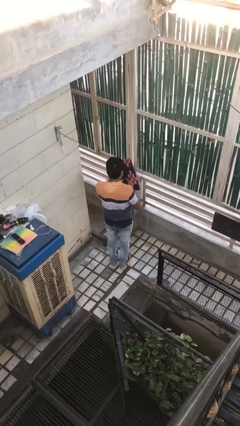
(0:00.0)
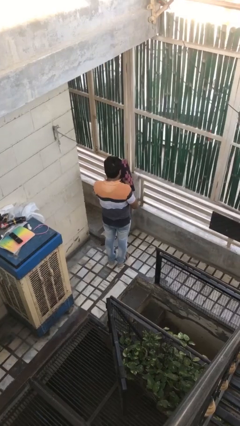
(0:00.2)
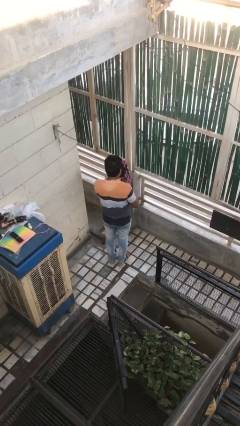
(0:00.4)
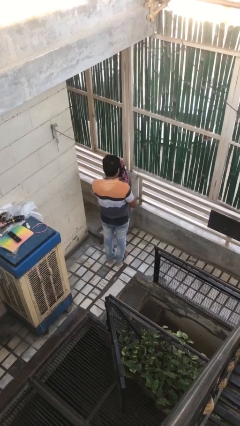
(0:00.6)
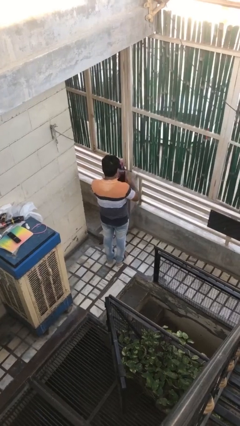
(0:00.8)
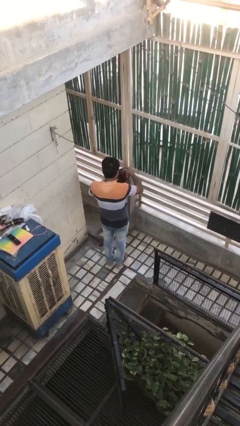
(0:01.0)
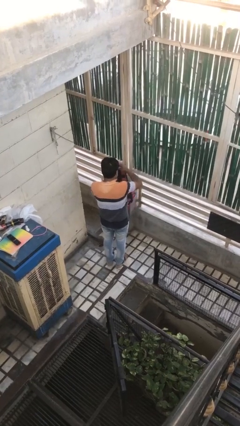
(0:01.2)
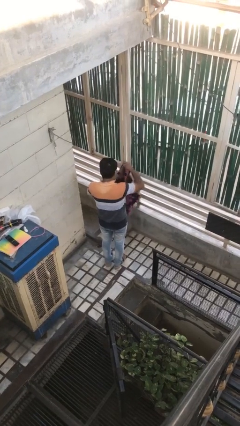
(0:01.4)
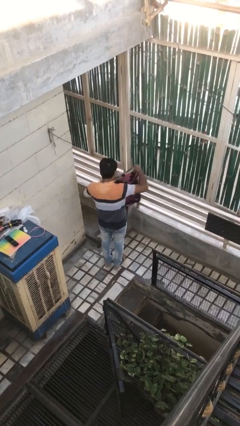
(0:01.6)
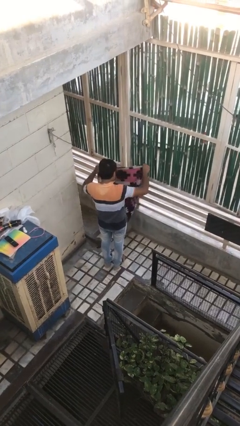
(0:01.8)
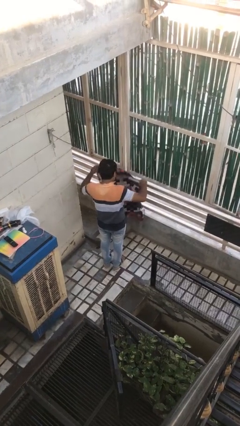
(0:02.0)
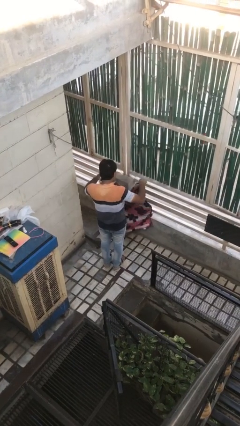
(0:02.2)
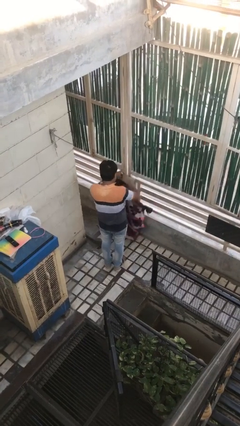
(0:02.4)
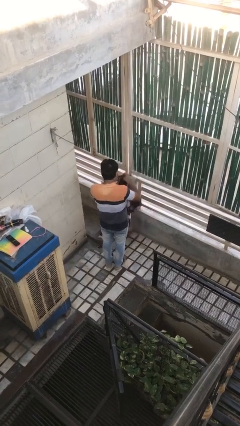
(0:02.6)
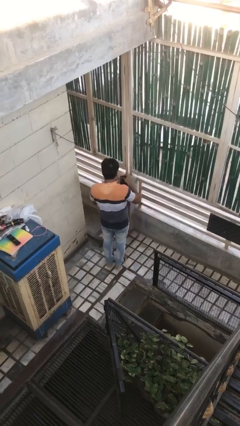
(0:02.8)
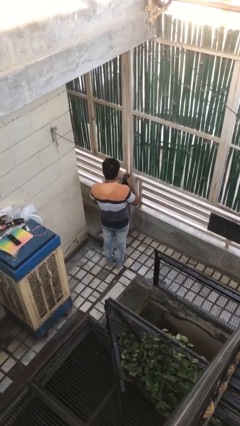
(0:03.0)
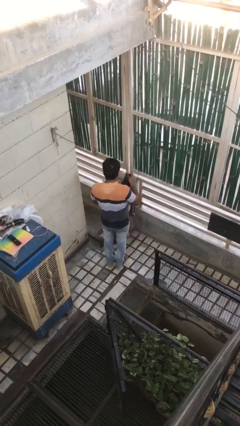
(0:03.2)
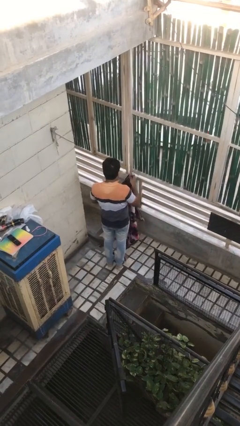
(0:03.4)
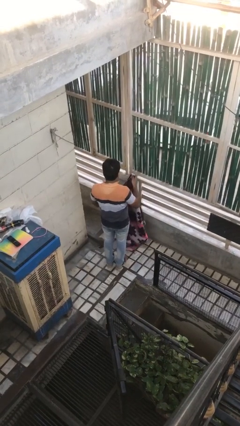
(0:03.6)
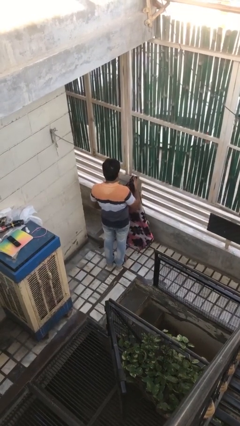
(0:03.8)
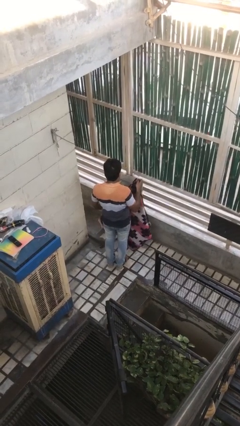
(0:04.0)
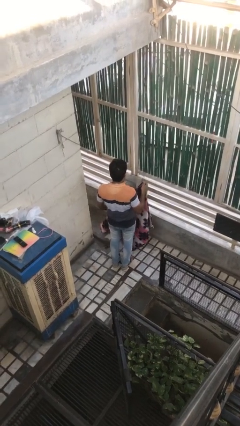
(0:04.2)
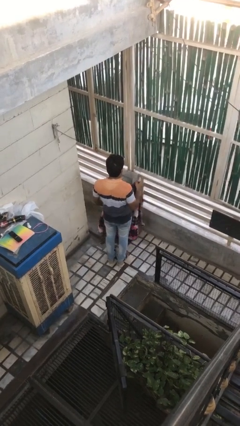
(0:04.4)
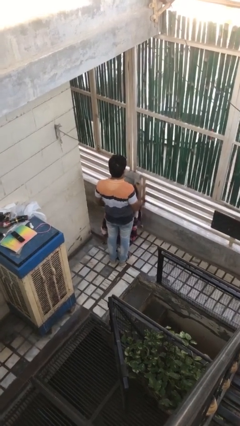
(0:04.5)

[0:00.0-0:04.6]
person unfolds blanket

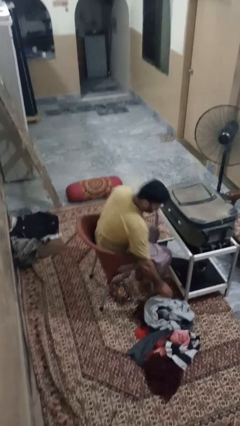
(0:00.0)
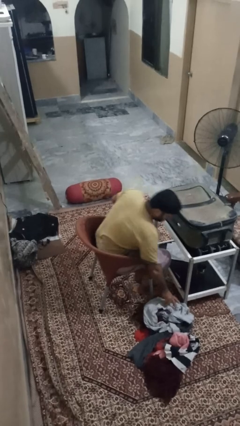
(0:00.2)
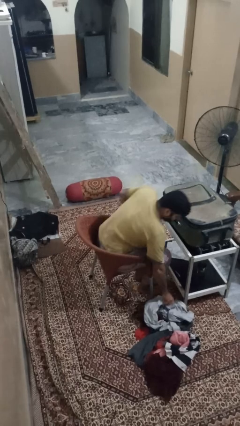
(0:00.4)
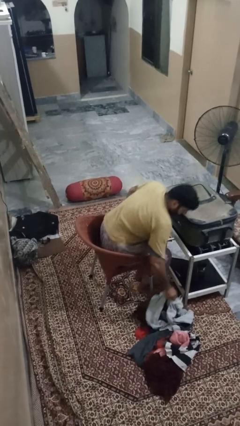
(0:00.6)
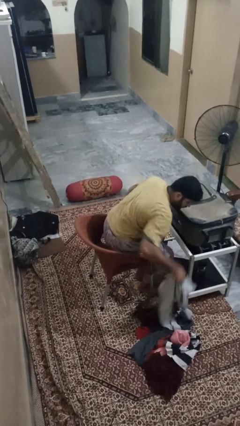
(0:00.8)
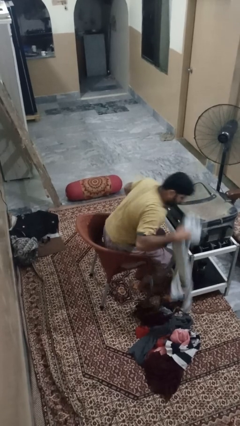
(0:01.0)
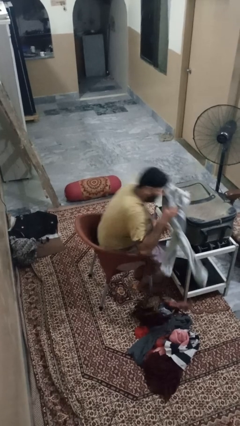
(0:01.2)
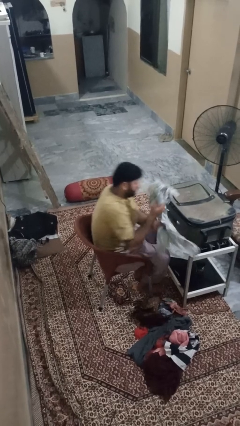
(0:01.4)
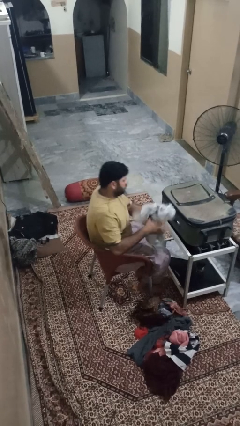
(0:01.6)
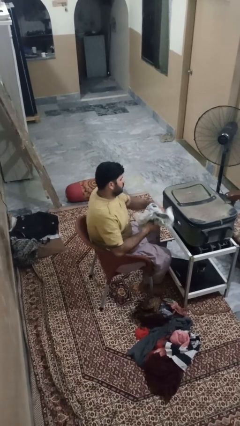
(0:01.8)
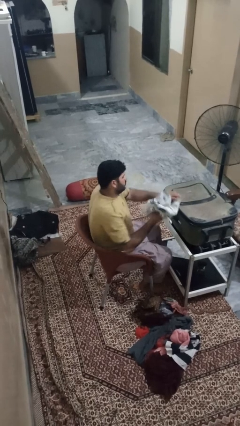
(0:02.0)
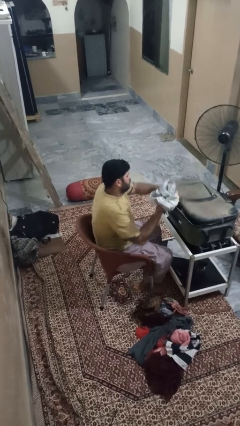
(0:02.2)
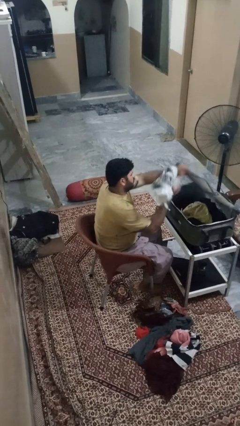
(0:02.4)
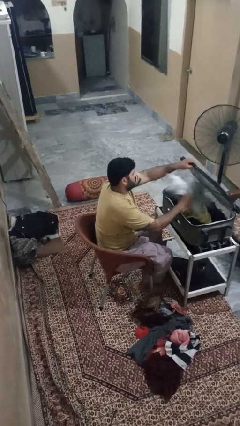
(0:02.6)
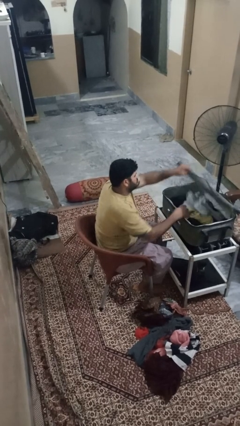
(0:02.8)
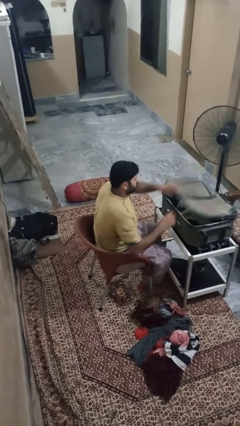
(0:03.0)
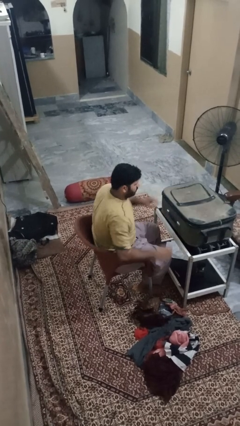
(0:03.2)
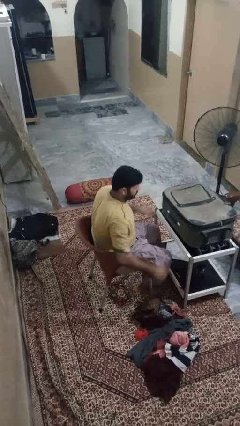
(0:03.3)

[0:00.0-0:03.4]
person loads clothes into suitcase

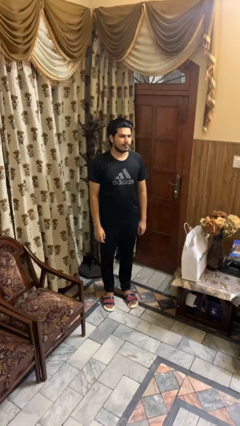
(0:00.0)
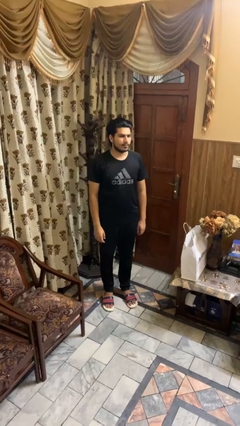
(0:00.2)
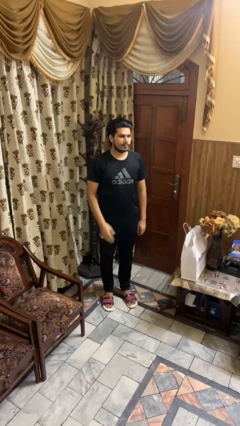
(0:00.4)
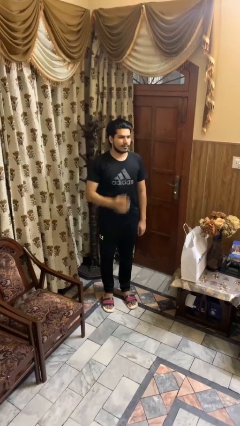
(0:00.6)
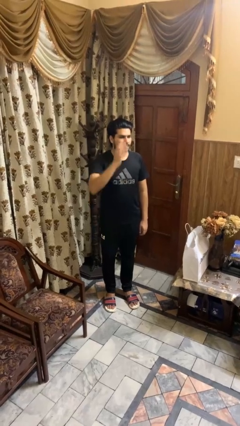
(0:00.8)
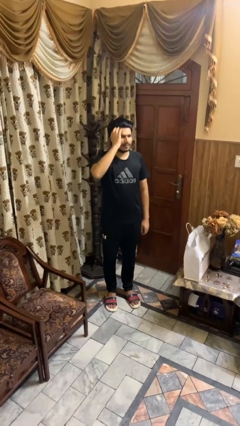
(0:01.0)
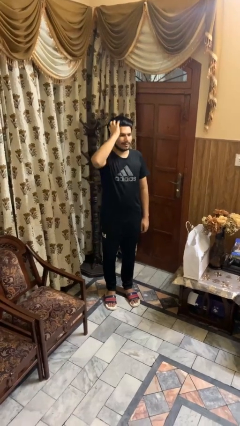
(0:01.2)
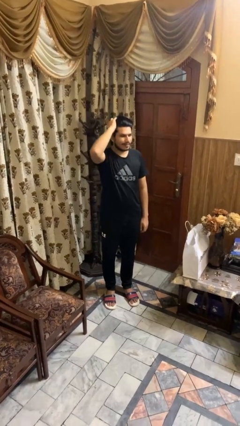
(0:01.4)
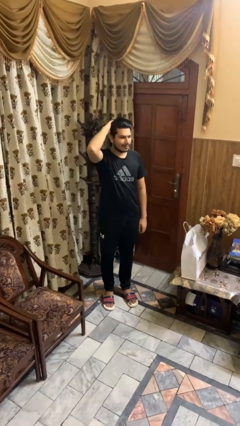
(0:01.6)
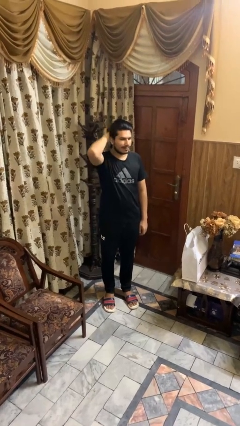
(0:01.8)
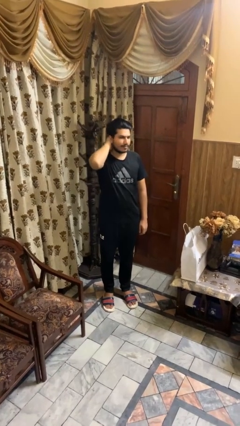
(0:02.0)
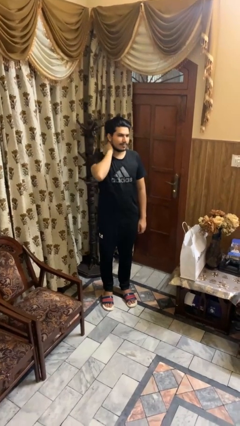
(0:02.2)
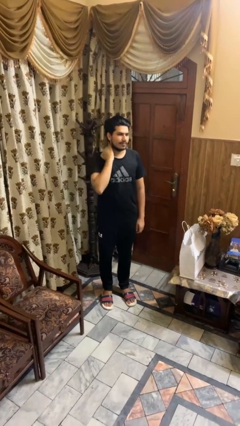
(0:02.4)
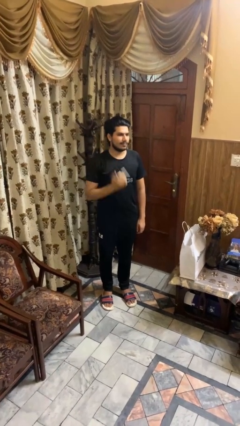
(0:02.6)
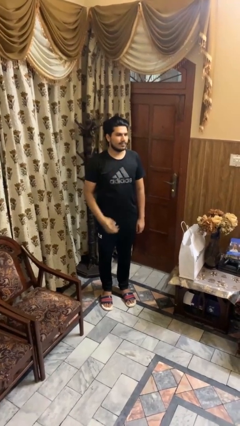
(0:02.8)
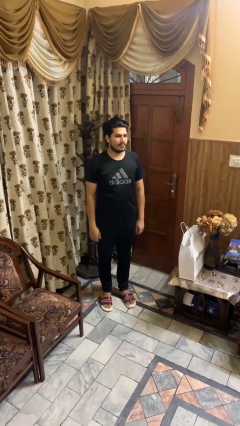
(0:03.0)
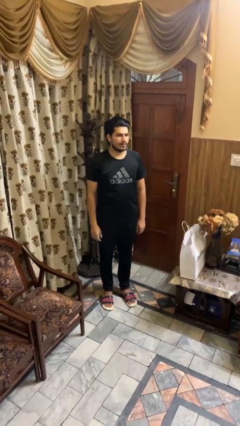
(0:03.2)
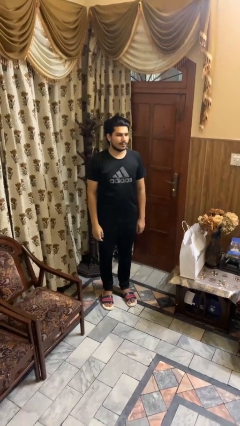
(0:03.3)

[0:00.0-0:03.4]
person strokes hair

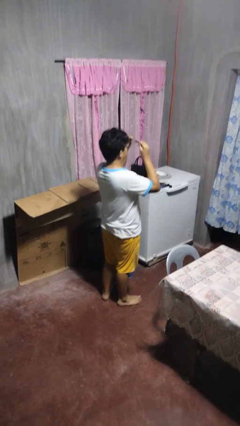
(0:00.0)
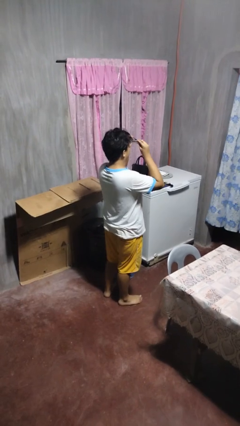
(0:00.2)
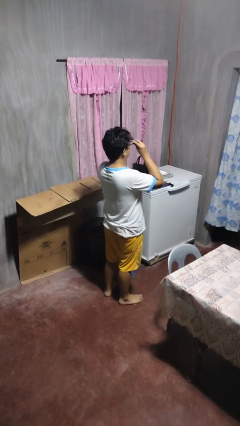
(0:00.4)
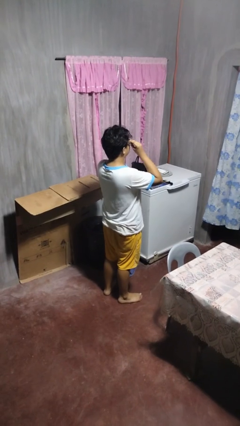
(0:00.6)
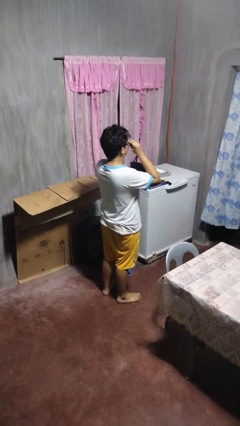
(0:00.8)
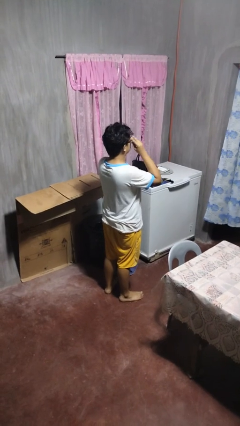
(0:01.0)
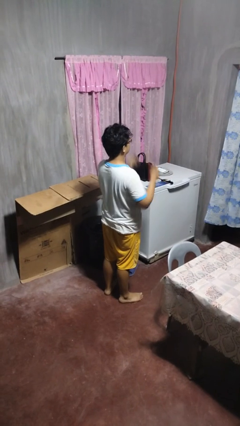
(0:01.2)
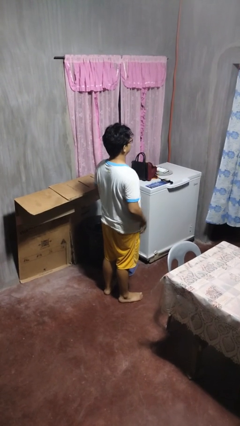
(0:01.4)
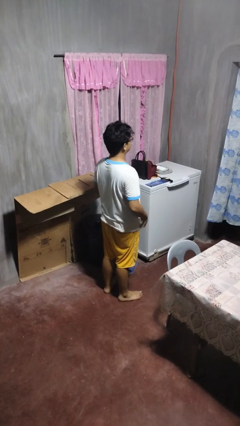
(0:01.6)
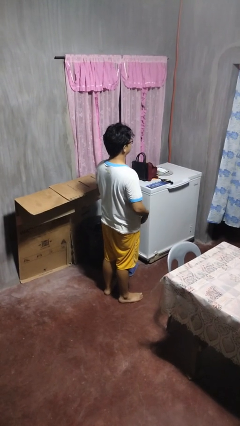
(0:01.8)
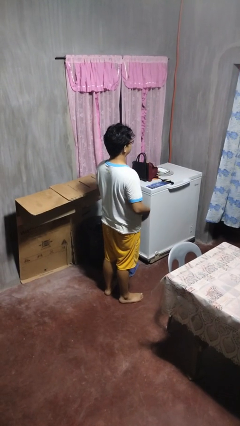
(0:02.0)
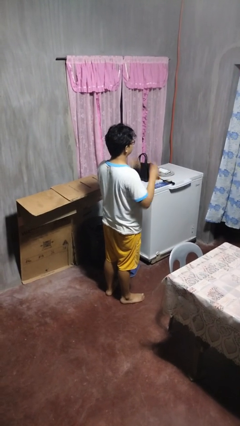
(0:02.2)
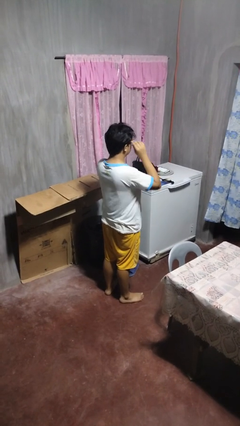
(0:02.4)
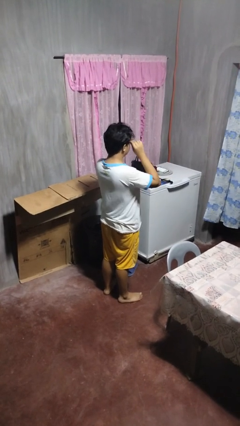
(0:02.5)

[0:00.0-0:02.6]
person puts on glasses

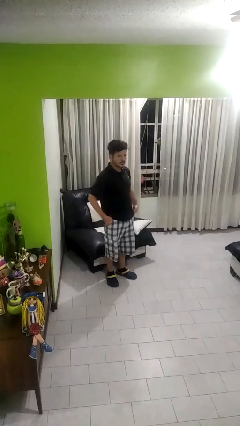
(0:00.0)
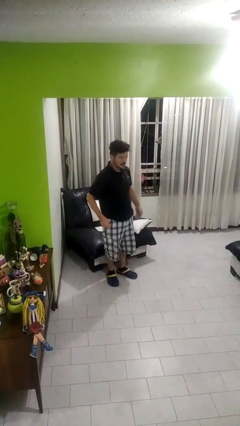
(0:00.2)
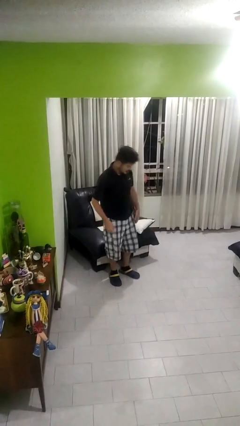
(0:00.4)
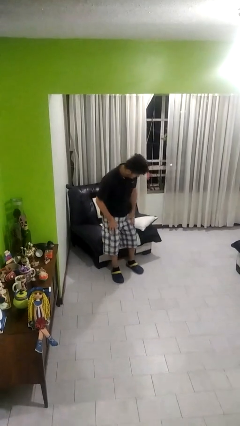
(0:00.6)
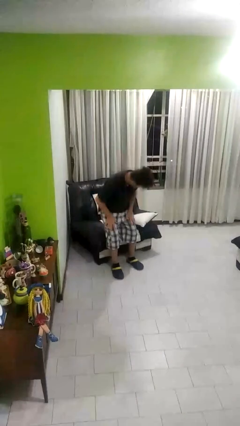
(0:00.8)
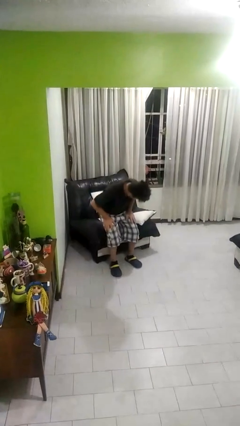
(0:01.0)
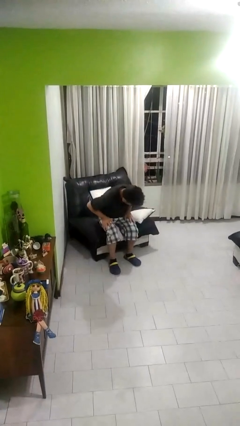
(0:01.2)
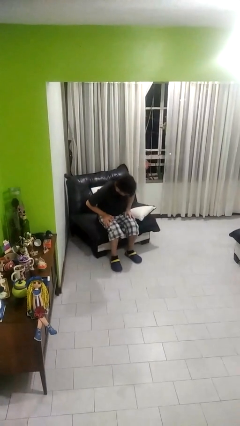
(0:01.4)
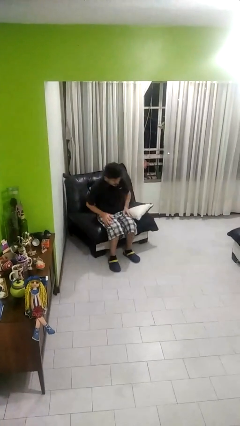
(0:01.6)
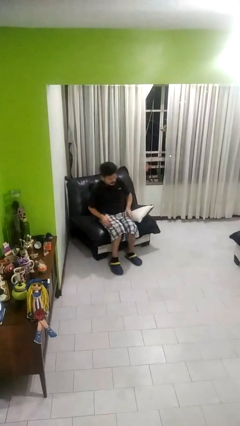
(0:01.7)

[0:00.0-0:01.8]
person lies down on couch

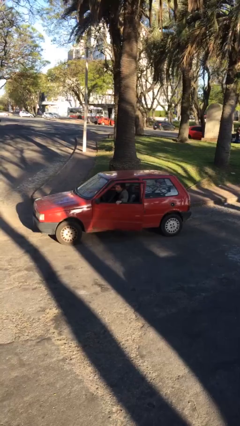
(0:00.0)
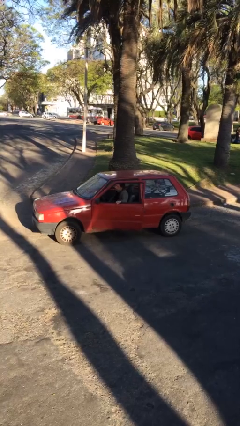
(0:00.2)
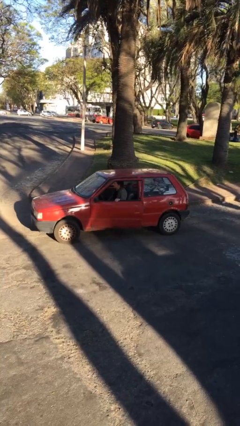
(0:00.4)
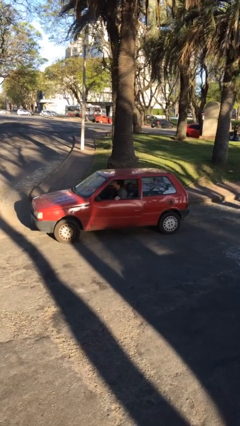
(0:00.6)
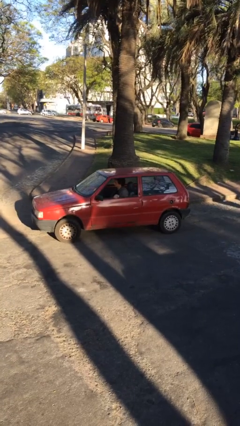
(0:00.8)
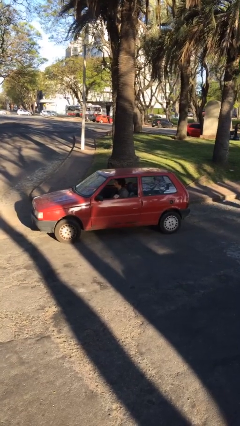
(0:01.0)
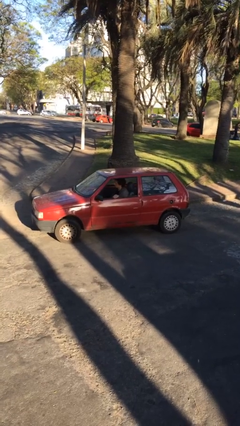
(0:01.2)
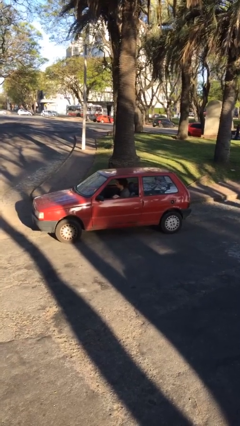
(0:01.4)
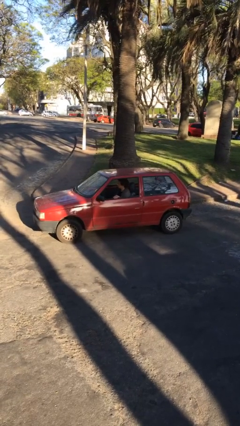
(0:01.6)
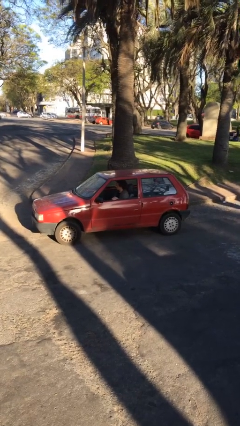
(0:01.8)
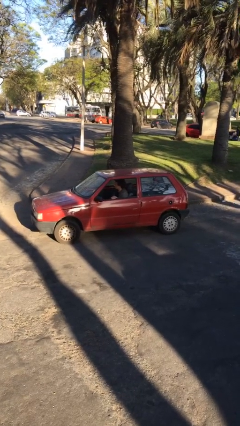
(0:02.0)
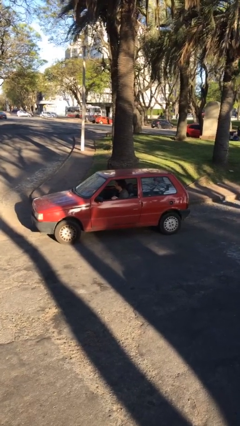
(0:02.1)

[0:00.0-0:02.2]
person closes car door
